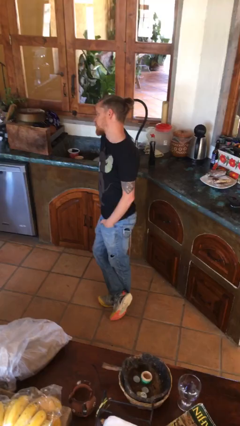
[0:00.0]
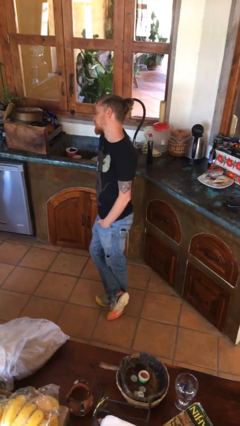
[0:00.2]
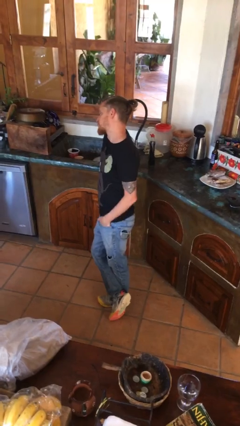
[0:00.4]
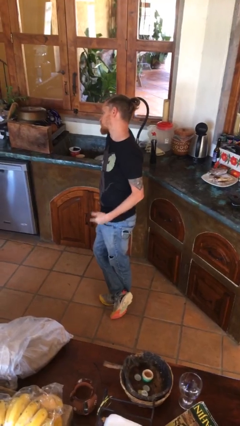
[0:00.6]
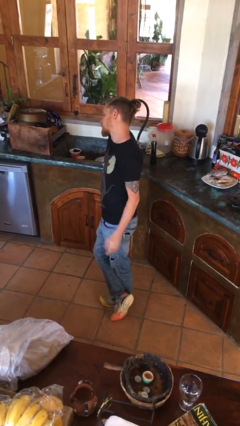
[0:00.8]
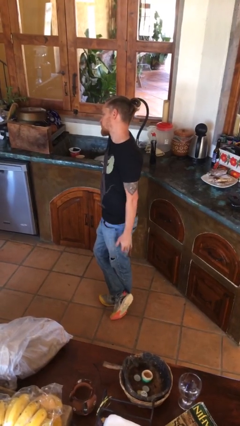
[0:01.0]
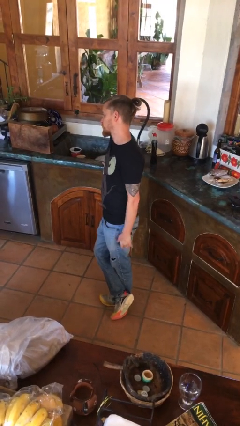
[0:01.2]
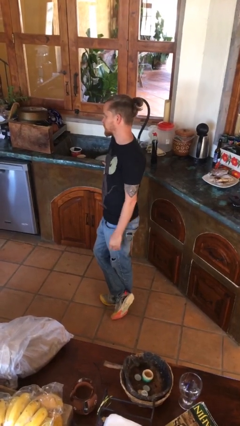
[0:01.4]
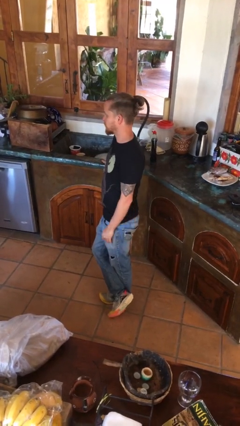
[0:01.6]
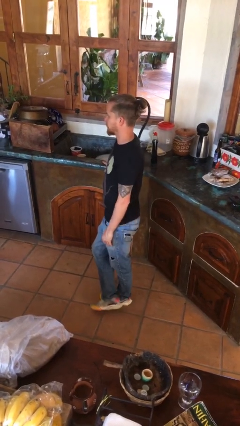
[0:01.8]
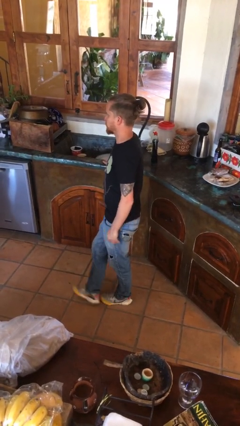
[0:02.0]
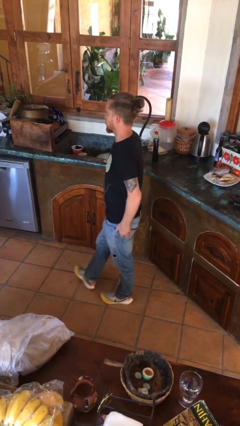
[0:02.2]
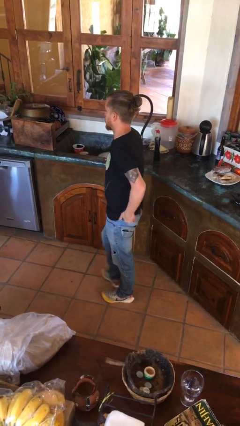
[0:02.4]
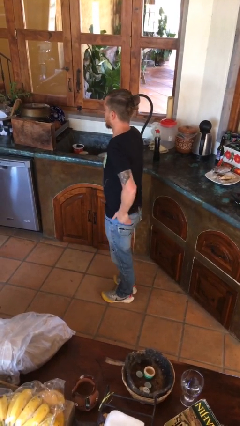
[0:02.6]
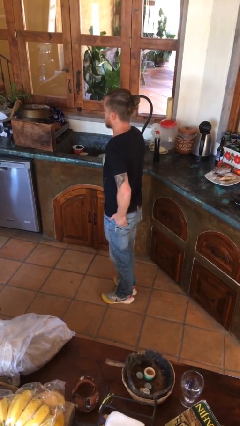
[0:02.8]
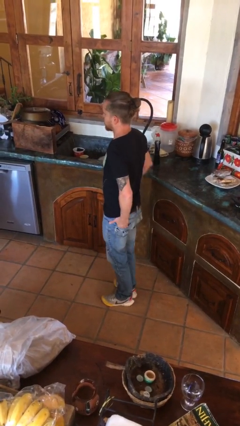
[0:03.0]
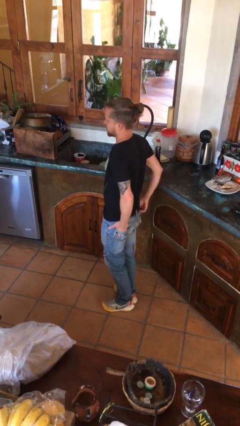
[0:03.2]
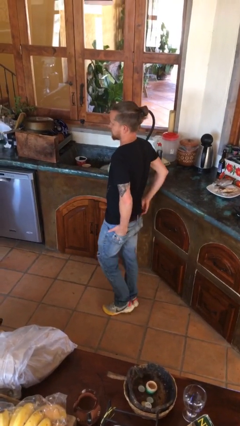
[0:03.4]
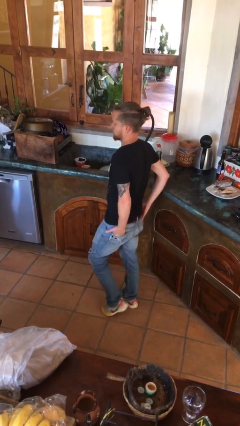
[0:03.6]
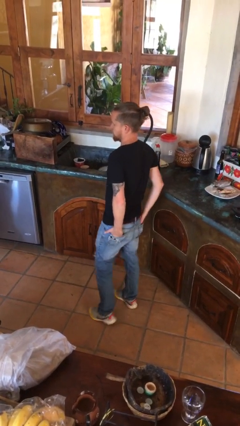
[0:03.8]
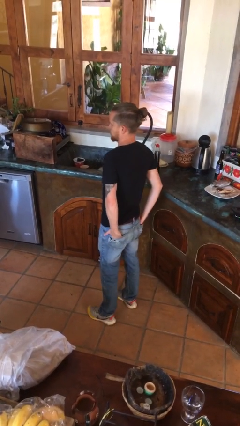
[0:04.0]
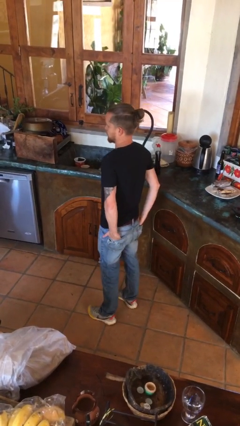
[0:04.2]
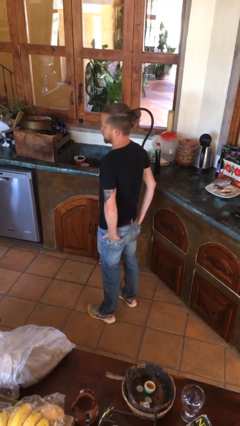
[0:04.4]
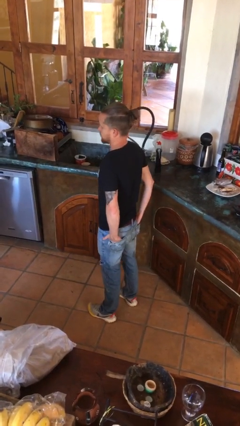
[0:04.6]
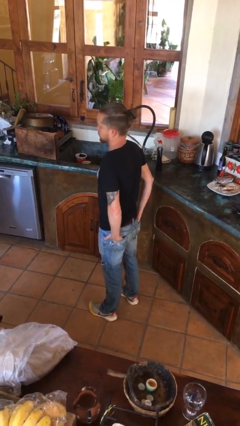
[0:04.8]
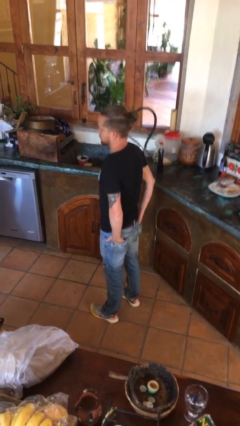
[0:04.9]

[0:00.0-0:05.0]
person puts hands in back pockets

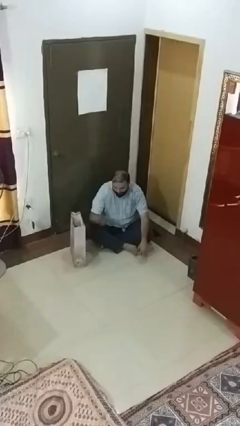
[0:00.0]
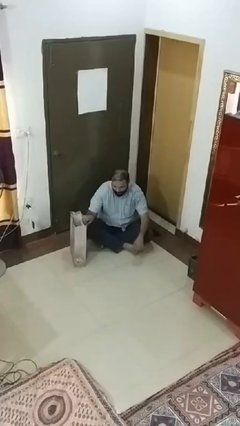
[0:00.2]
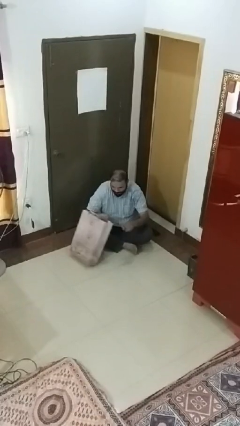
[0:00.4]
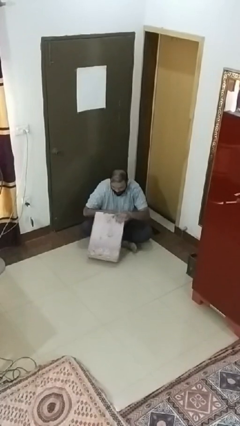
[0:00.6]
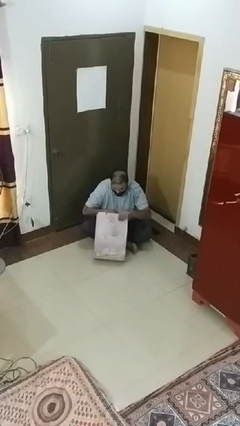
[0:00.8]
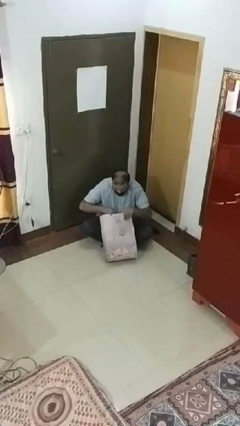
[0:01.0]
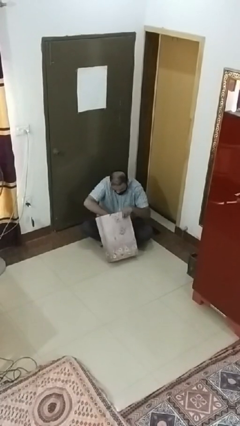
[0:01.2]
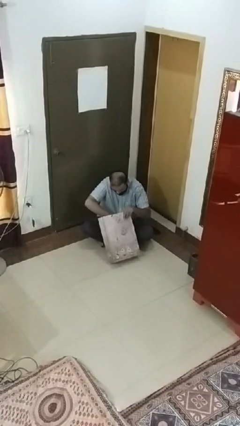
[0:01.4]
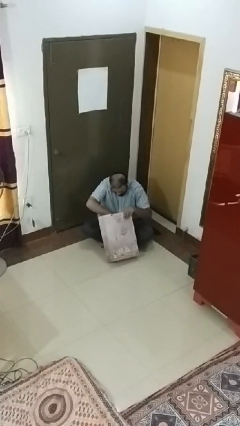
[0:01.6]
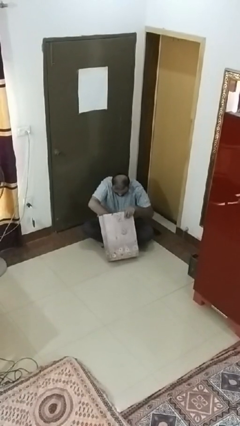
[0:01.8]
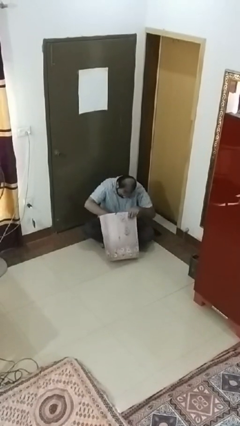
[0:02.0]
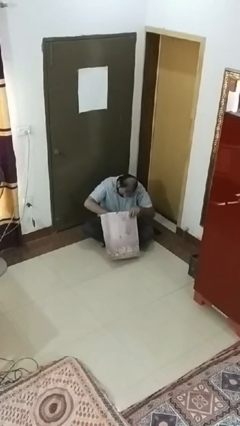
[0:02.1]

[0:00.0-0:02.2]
person searches under bed

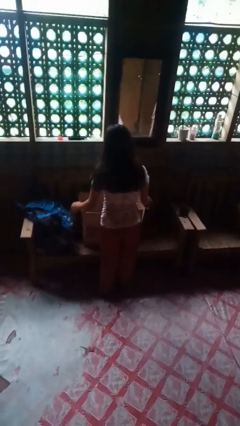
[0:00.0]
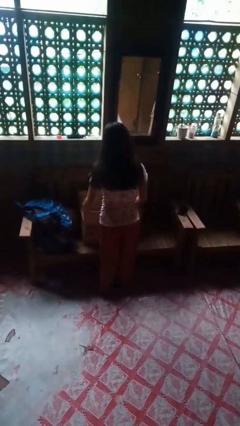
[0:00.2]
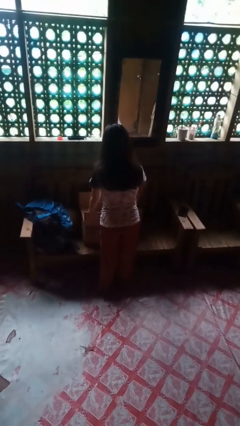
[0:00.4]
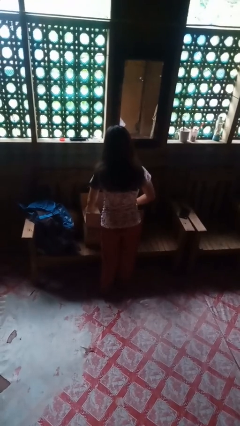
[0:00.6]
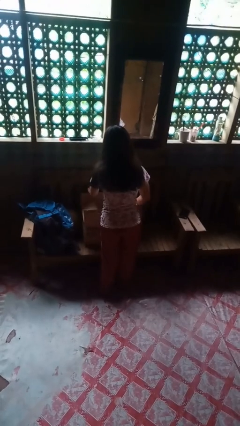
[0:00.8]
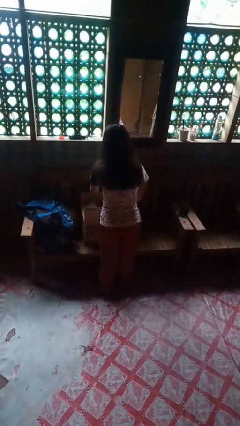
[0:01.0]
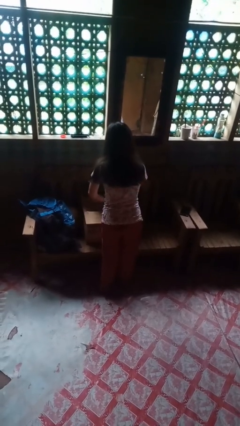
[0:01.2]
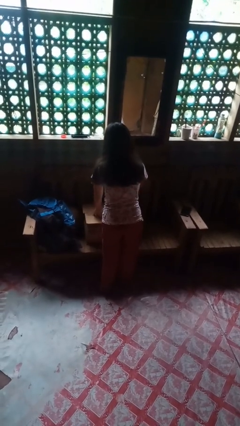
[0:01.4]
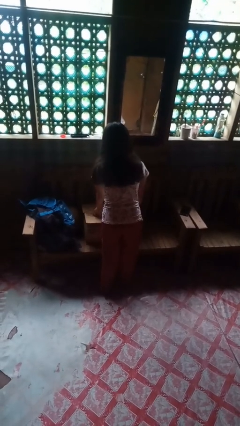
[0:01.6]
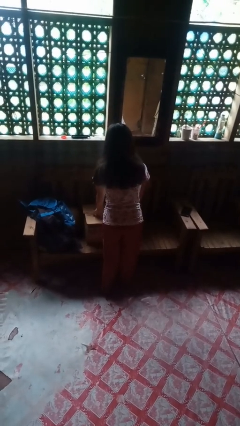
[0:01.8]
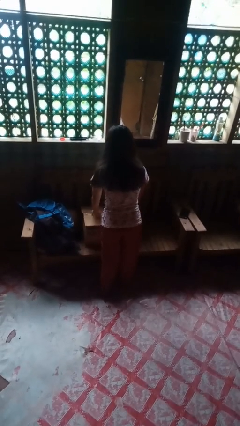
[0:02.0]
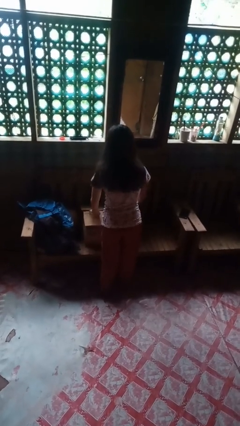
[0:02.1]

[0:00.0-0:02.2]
person closes box

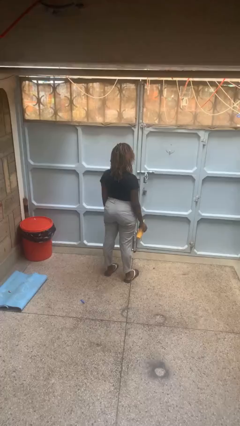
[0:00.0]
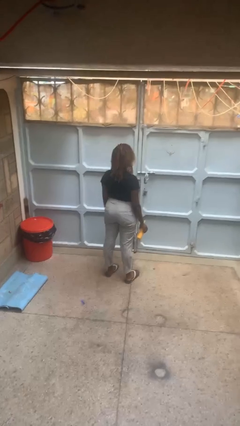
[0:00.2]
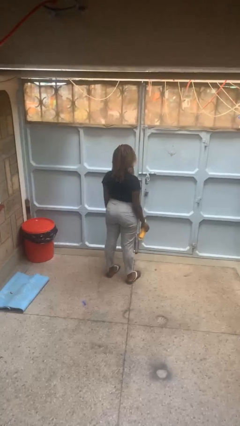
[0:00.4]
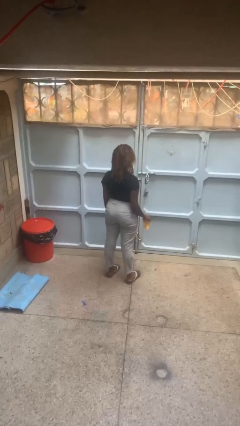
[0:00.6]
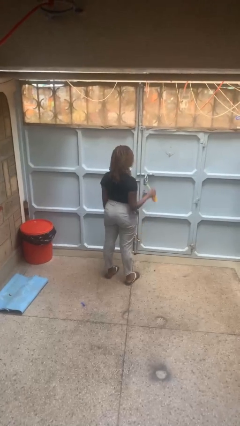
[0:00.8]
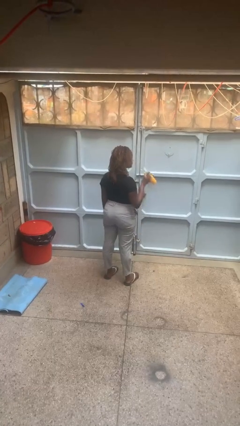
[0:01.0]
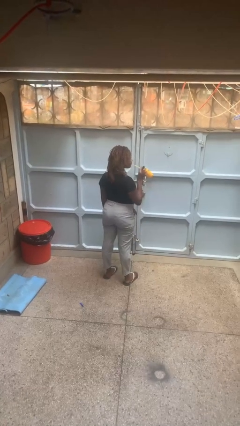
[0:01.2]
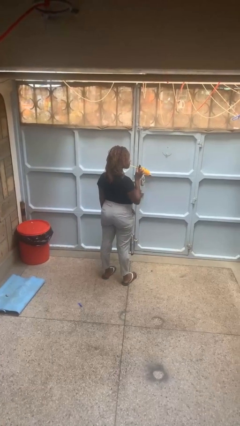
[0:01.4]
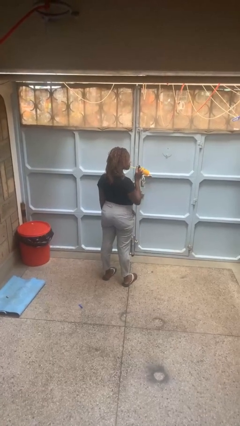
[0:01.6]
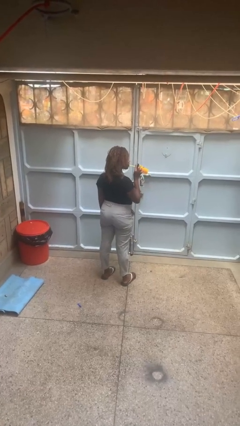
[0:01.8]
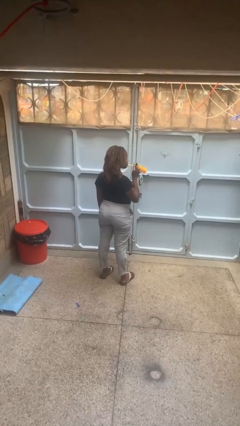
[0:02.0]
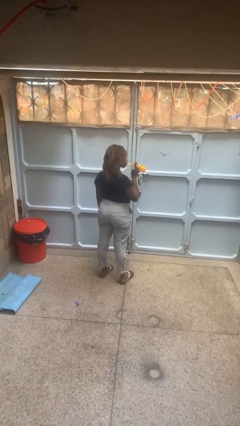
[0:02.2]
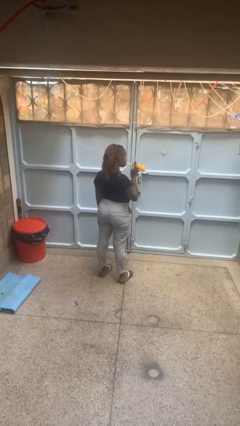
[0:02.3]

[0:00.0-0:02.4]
person drinks from straw

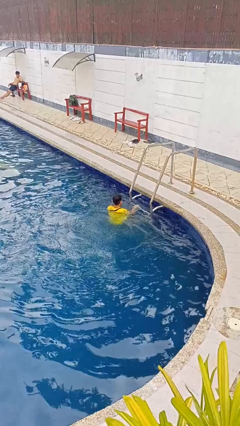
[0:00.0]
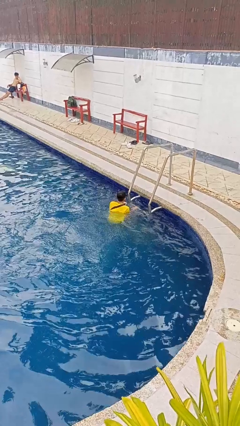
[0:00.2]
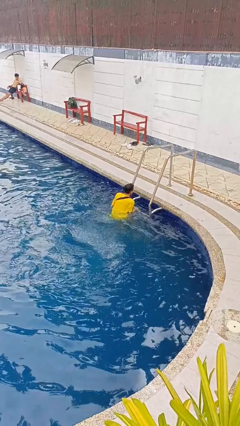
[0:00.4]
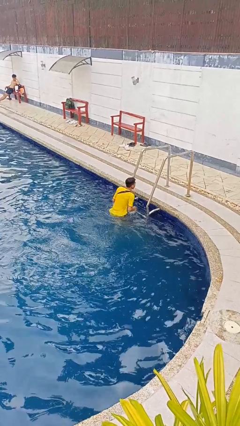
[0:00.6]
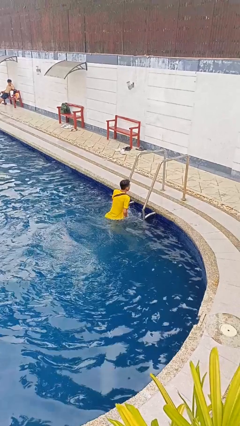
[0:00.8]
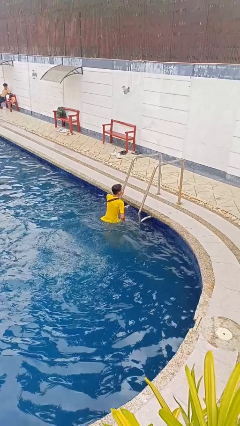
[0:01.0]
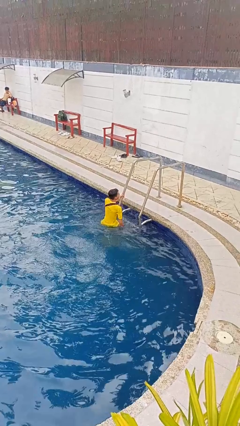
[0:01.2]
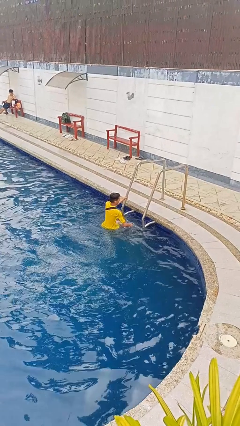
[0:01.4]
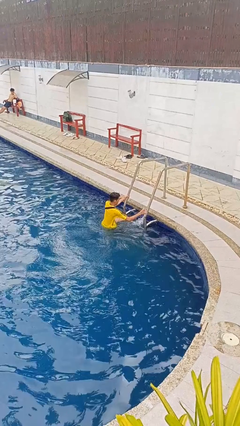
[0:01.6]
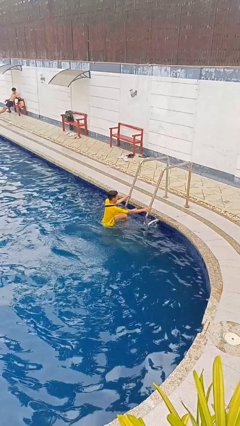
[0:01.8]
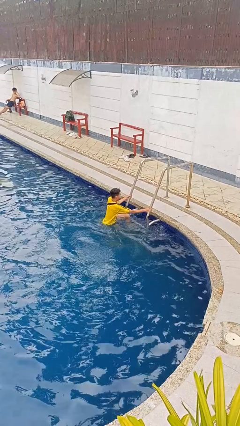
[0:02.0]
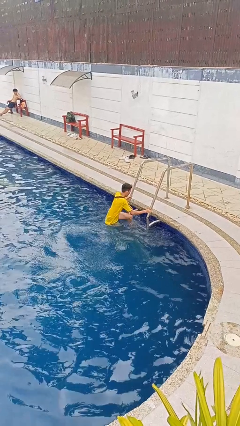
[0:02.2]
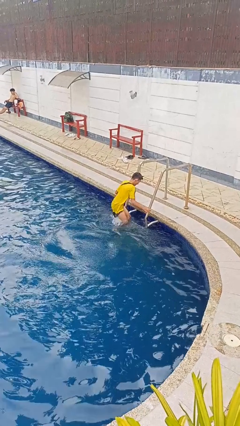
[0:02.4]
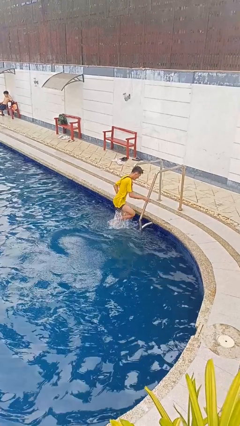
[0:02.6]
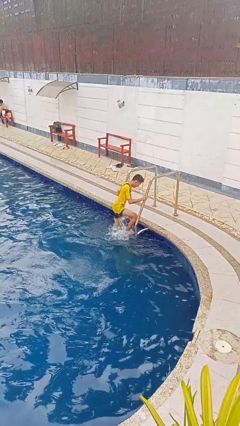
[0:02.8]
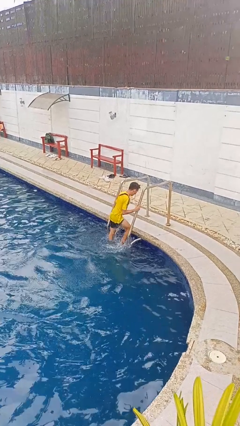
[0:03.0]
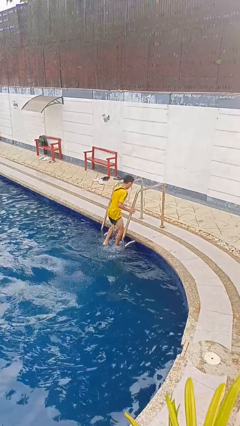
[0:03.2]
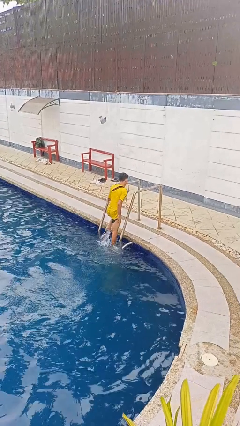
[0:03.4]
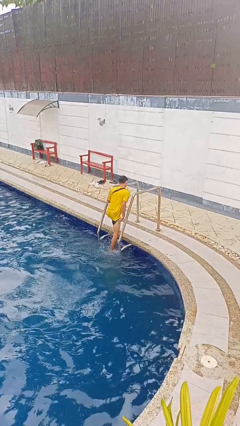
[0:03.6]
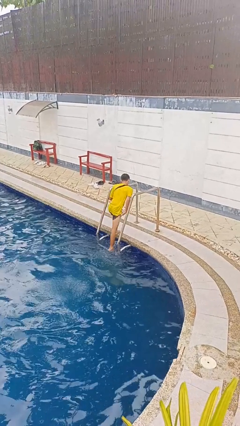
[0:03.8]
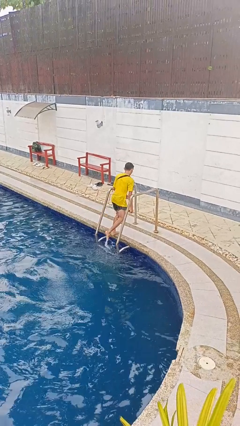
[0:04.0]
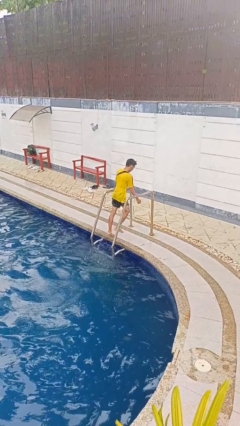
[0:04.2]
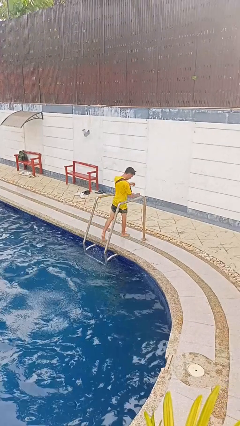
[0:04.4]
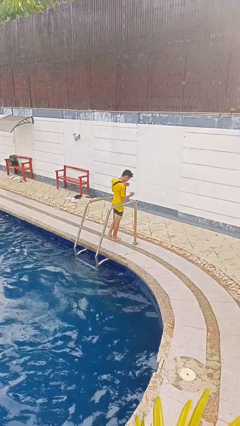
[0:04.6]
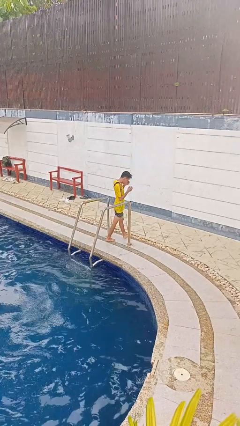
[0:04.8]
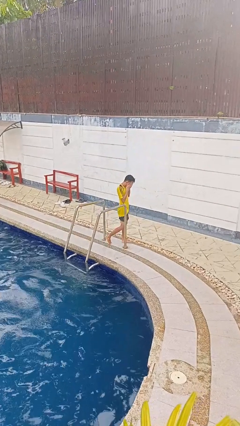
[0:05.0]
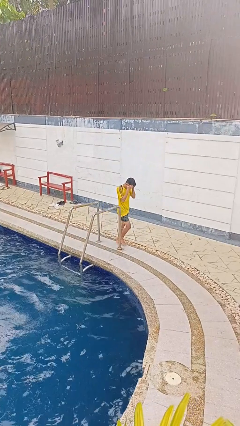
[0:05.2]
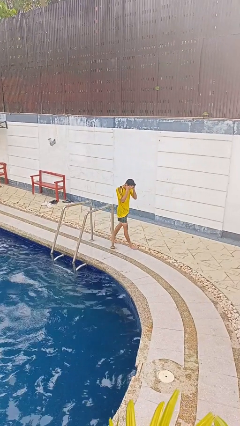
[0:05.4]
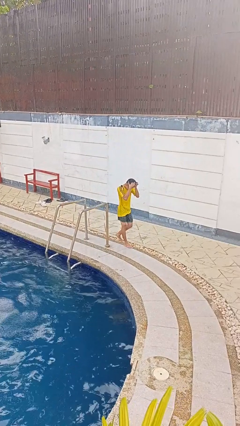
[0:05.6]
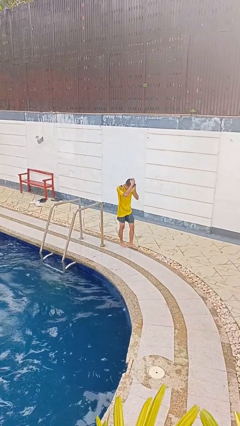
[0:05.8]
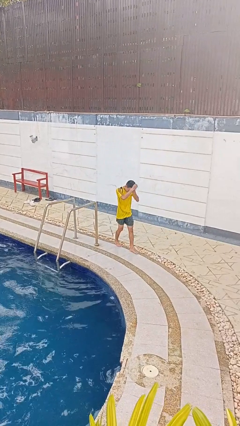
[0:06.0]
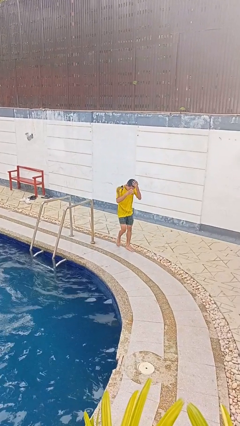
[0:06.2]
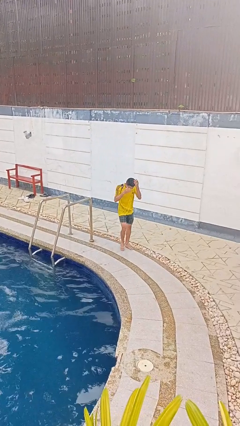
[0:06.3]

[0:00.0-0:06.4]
person exits pool
